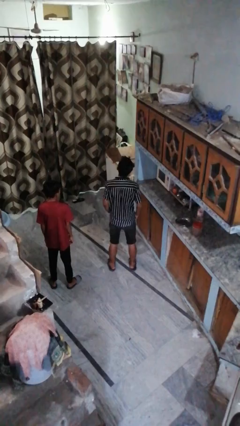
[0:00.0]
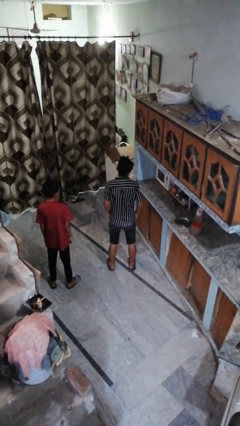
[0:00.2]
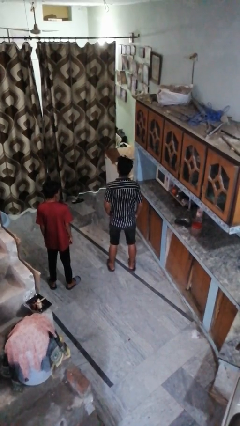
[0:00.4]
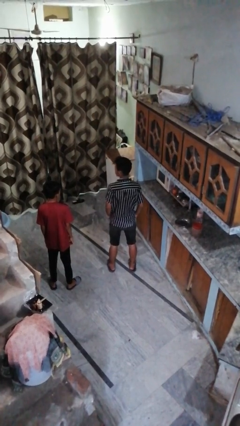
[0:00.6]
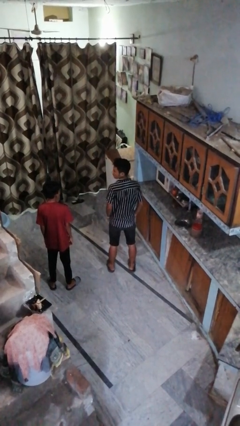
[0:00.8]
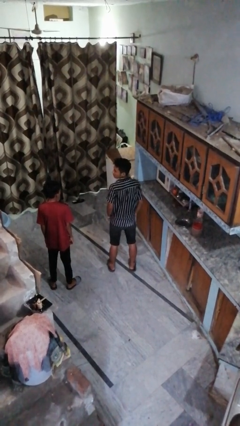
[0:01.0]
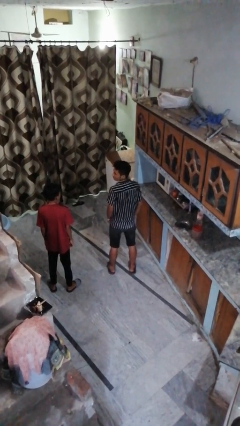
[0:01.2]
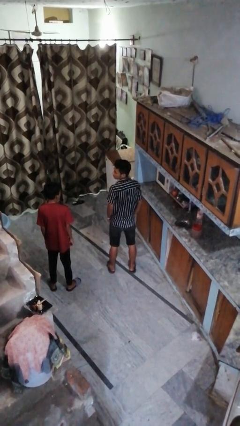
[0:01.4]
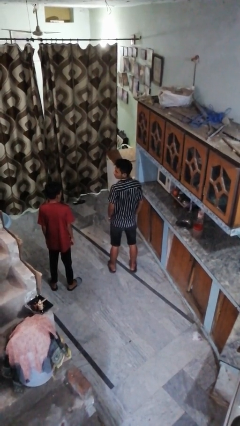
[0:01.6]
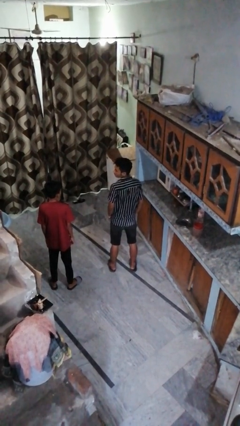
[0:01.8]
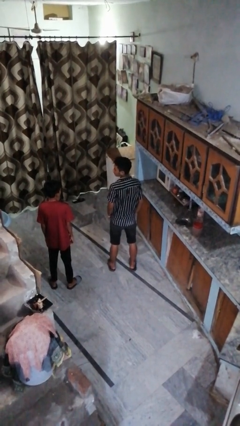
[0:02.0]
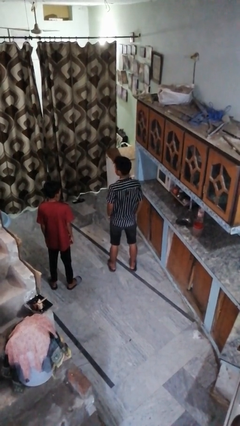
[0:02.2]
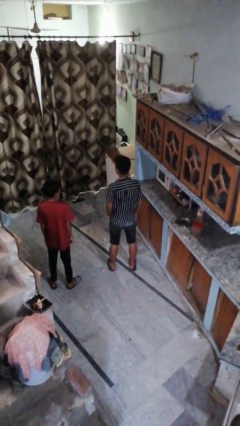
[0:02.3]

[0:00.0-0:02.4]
person looks over shoulder

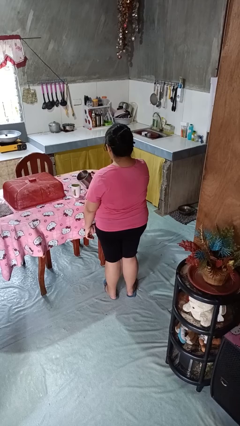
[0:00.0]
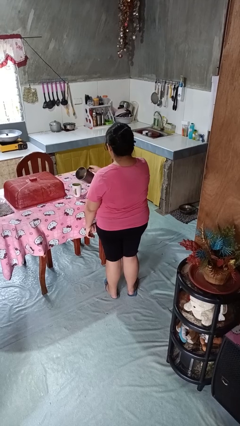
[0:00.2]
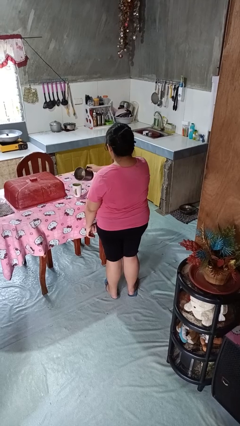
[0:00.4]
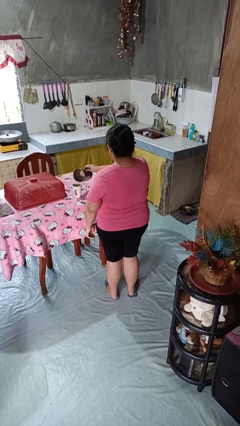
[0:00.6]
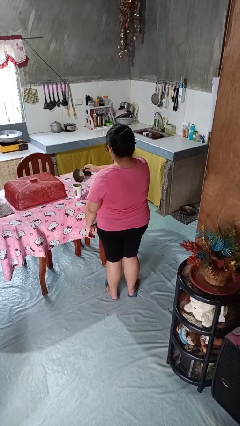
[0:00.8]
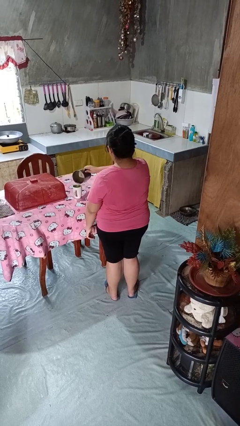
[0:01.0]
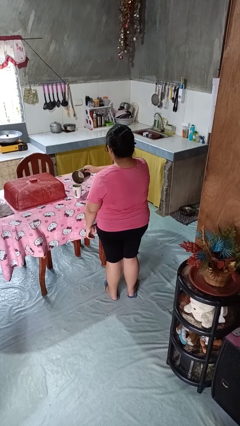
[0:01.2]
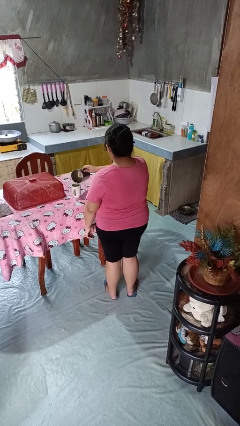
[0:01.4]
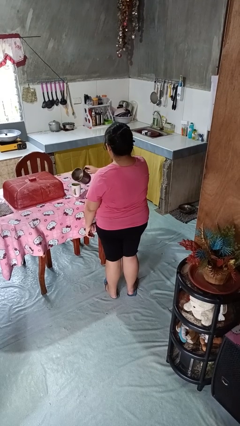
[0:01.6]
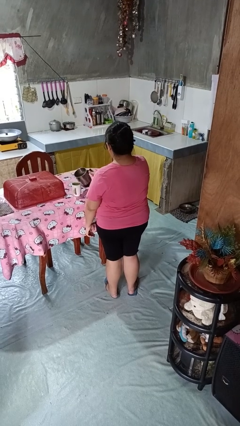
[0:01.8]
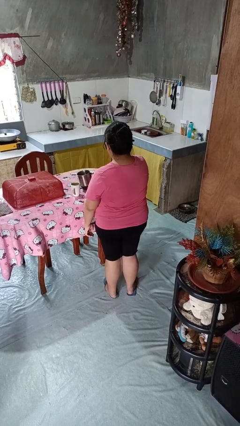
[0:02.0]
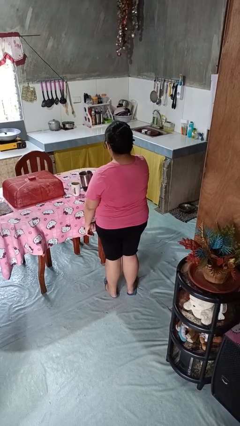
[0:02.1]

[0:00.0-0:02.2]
person pours coffee into mug

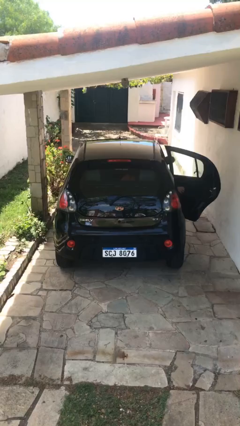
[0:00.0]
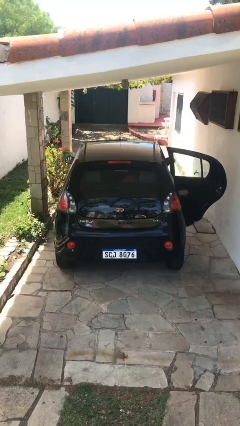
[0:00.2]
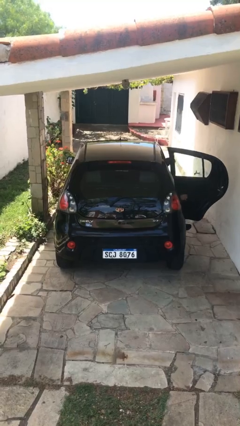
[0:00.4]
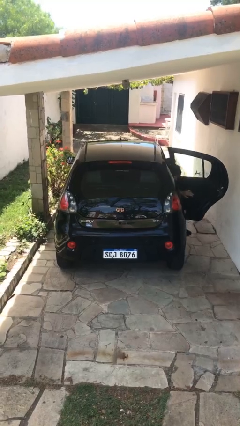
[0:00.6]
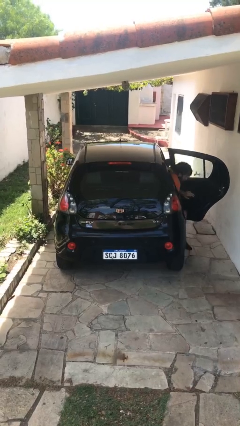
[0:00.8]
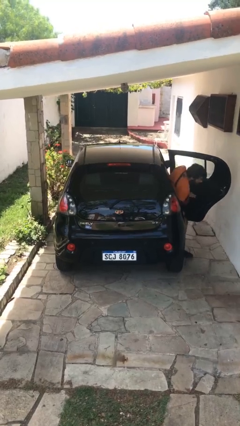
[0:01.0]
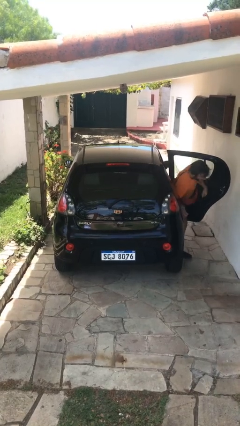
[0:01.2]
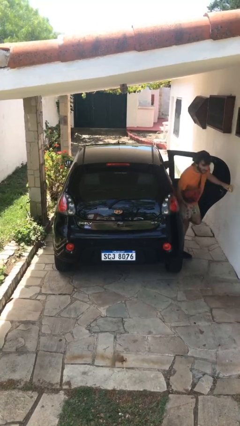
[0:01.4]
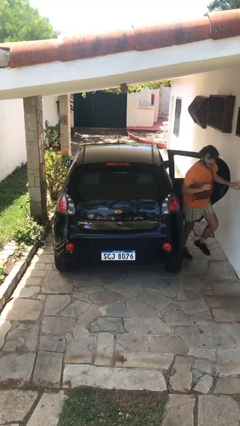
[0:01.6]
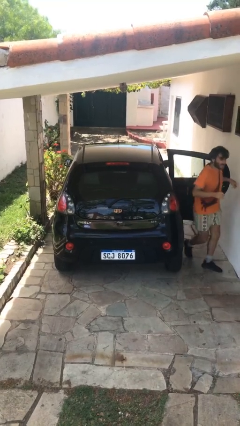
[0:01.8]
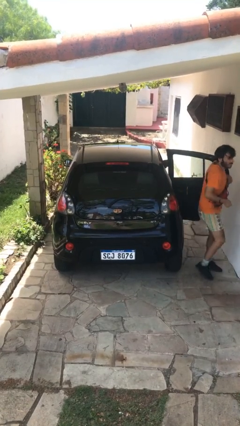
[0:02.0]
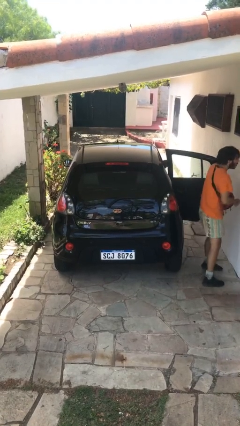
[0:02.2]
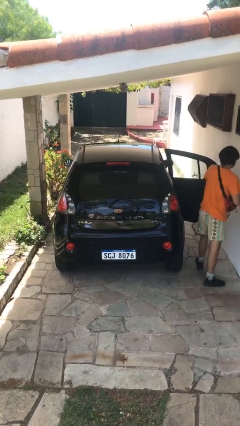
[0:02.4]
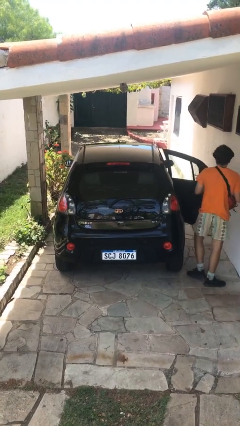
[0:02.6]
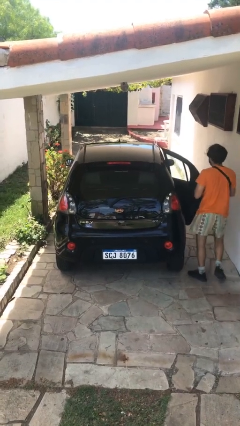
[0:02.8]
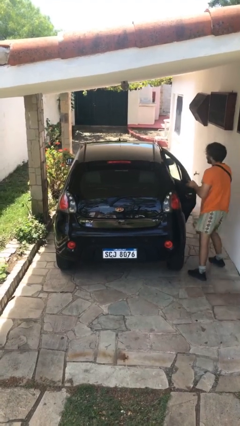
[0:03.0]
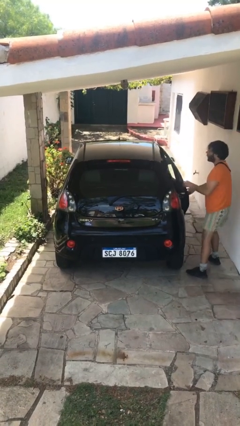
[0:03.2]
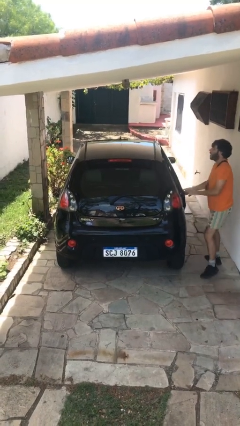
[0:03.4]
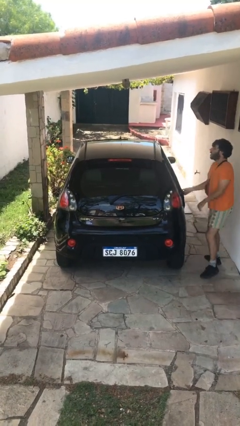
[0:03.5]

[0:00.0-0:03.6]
car drops off person

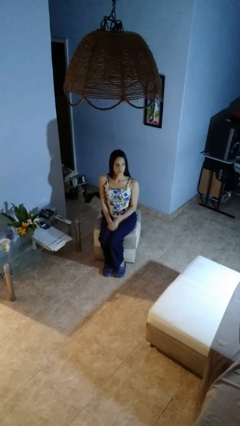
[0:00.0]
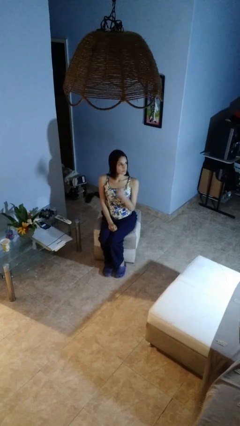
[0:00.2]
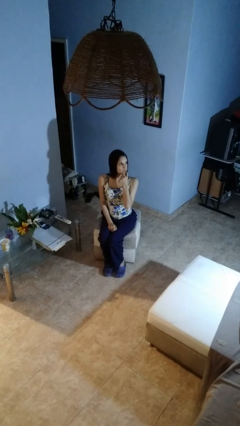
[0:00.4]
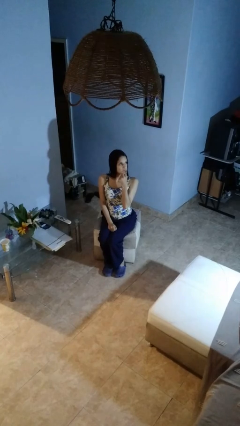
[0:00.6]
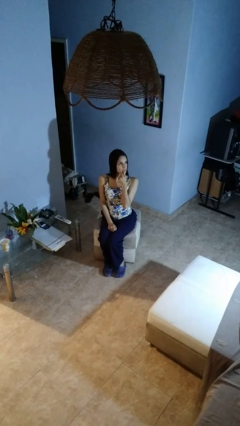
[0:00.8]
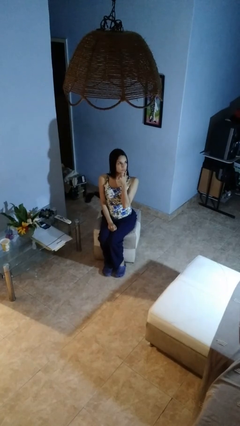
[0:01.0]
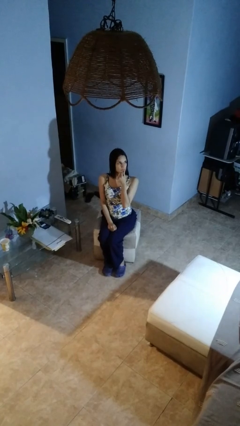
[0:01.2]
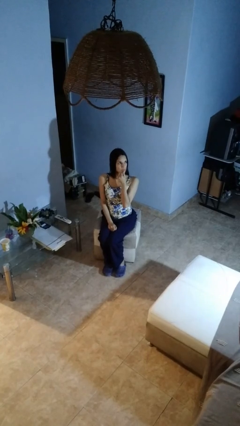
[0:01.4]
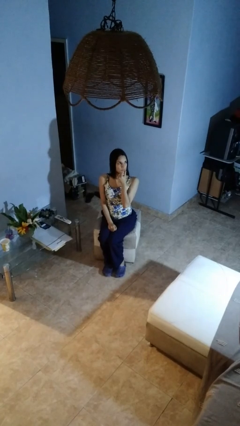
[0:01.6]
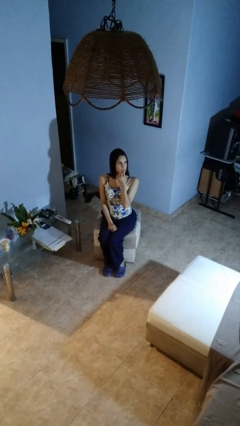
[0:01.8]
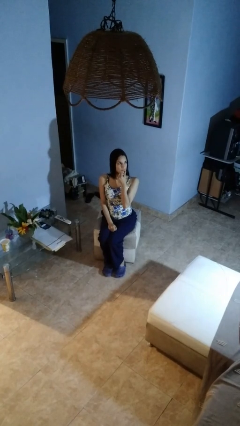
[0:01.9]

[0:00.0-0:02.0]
person strokes chin

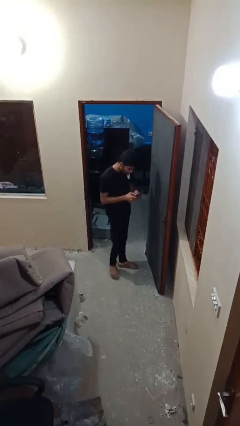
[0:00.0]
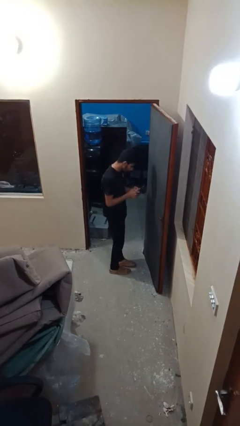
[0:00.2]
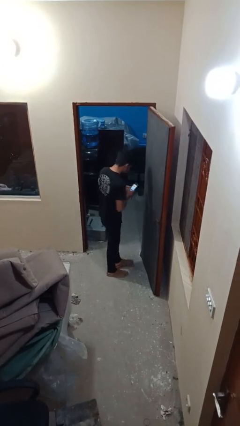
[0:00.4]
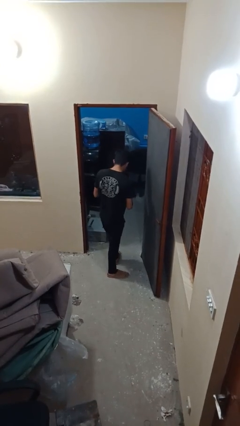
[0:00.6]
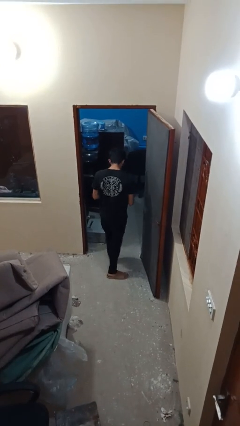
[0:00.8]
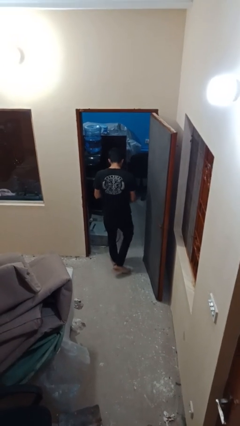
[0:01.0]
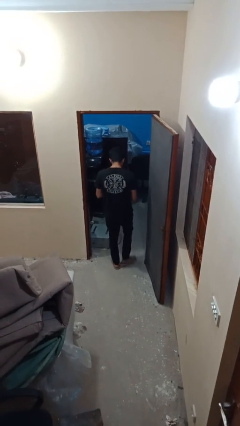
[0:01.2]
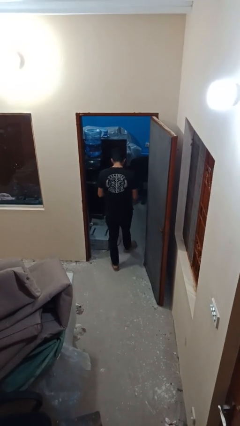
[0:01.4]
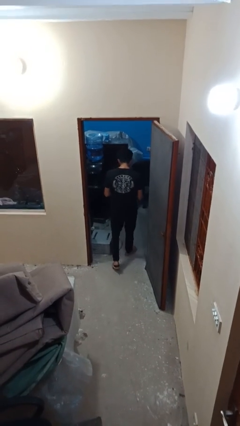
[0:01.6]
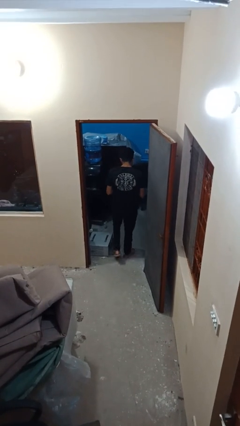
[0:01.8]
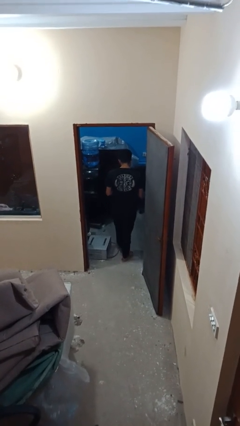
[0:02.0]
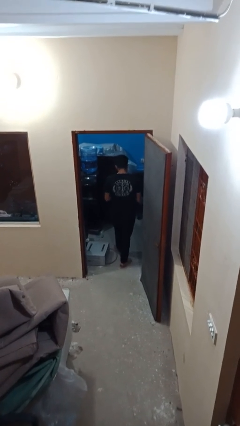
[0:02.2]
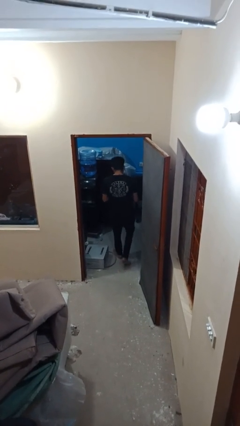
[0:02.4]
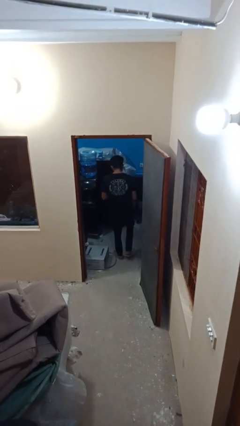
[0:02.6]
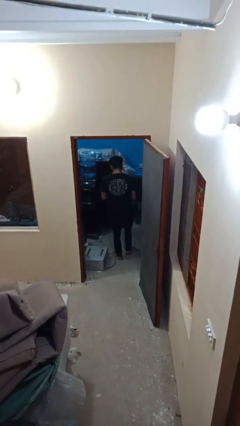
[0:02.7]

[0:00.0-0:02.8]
person exits scene through structure

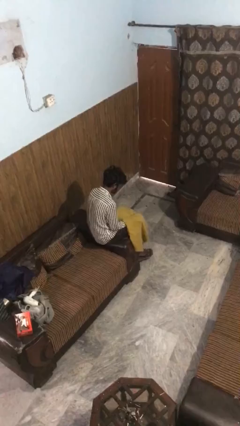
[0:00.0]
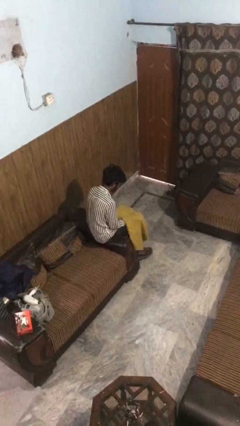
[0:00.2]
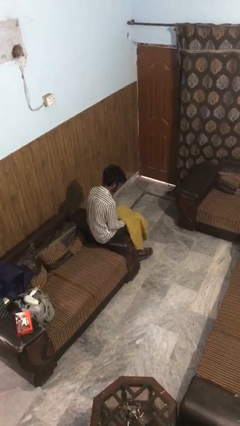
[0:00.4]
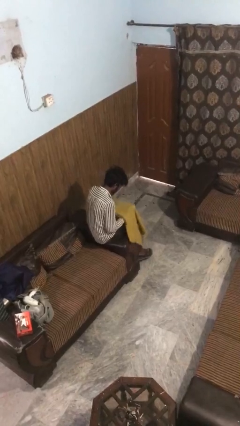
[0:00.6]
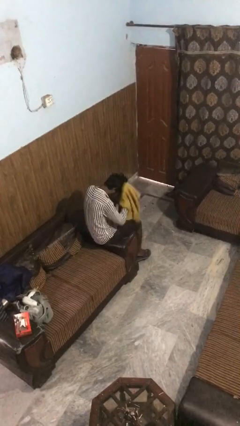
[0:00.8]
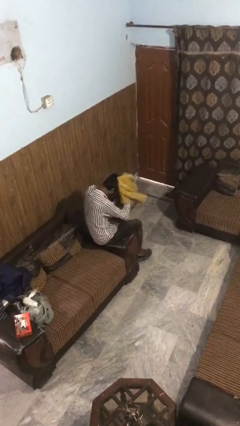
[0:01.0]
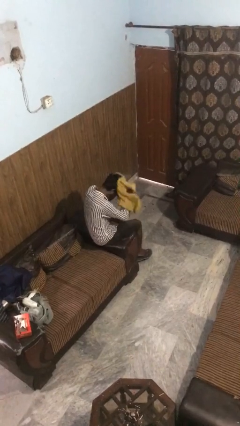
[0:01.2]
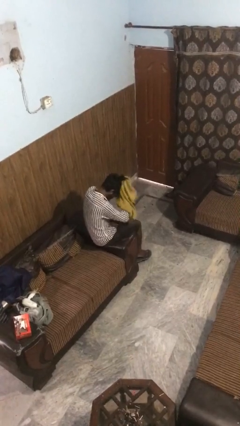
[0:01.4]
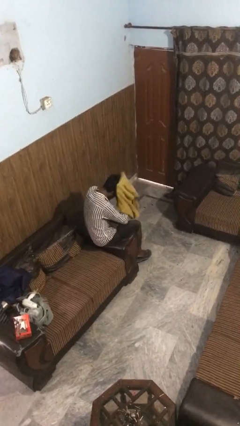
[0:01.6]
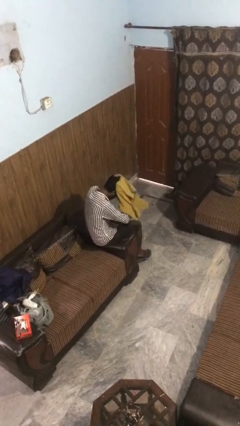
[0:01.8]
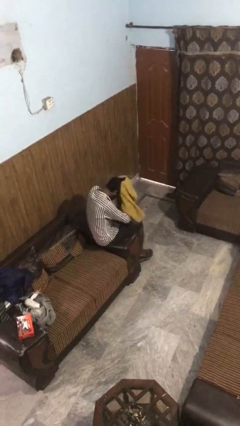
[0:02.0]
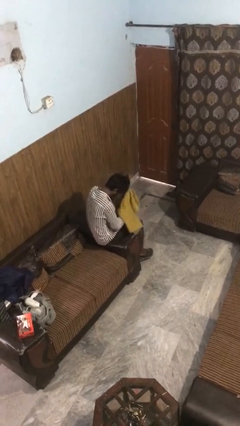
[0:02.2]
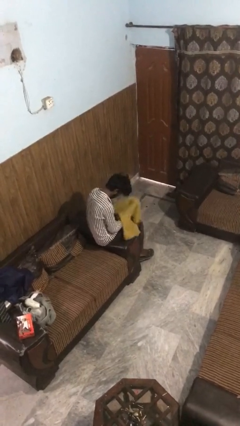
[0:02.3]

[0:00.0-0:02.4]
person dries hair with towel

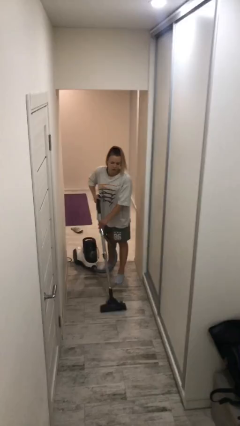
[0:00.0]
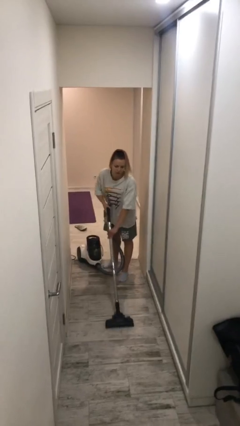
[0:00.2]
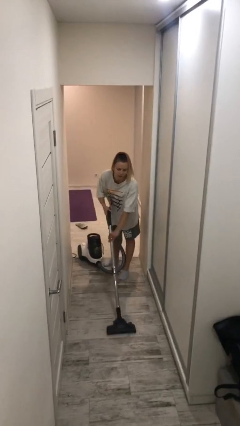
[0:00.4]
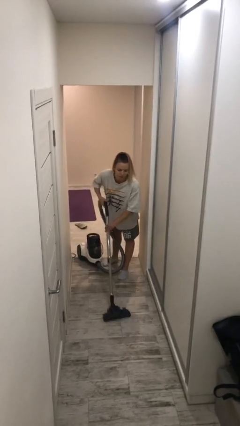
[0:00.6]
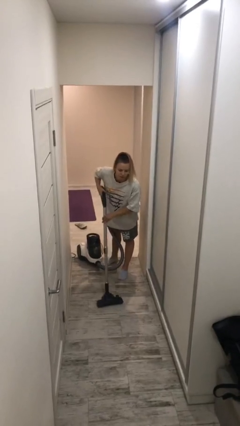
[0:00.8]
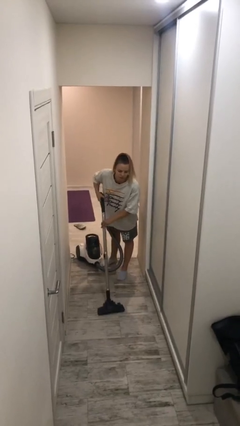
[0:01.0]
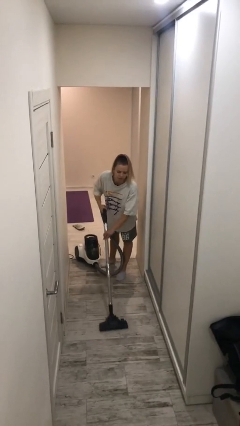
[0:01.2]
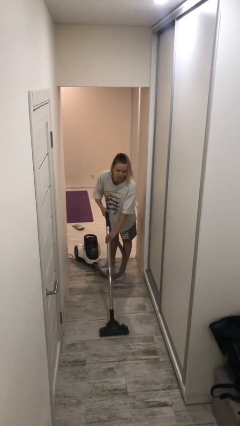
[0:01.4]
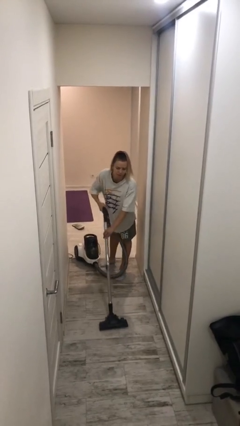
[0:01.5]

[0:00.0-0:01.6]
person vacuums carpet

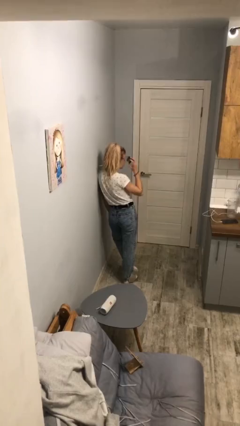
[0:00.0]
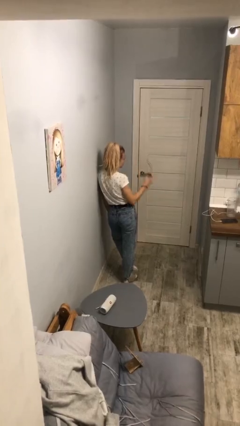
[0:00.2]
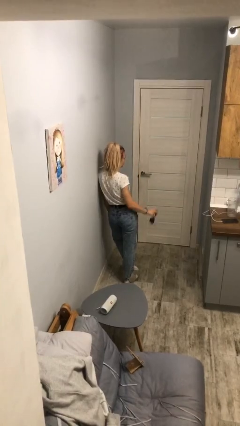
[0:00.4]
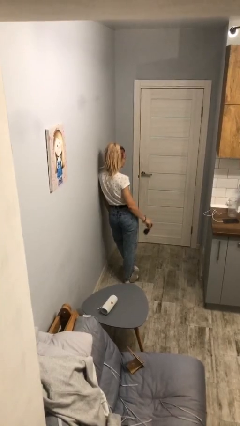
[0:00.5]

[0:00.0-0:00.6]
person takes off glasses
